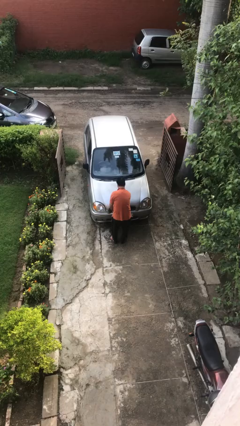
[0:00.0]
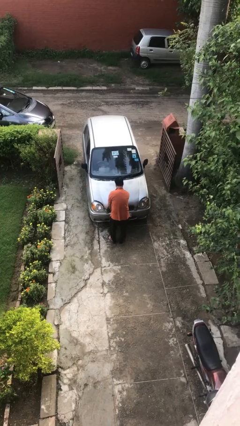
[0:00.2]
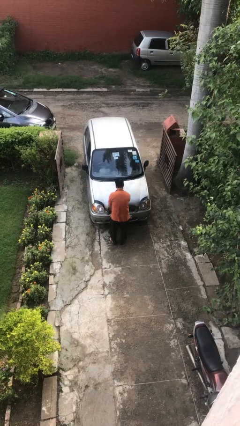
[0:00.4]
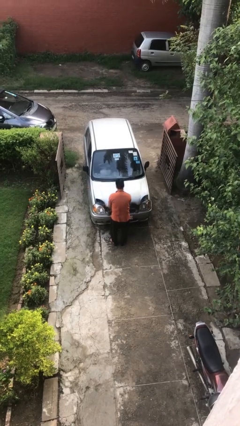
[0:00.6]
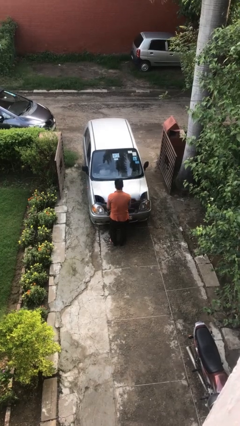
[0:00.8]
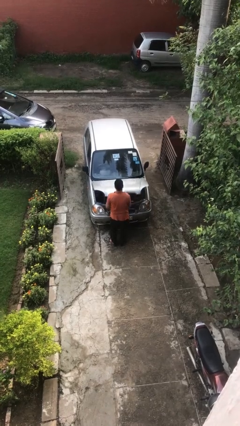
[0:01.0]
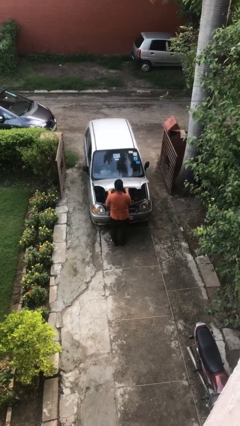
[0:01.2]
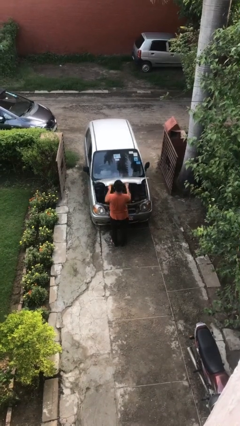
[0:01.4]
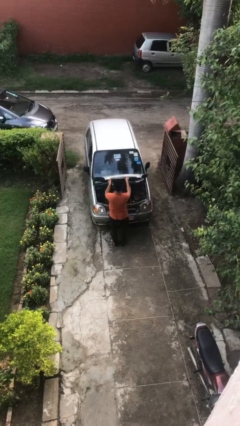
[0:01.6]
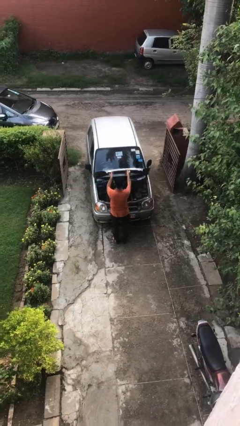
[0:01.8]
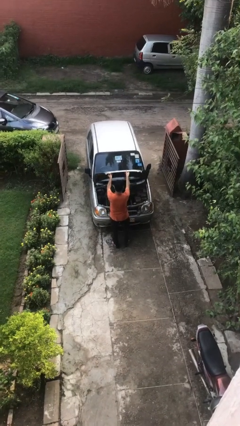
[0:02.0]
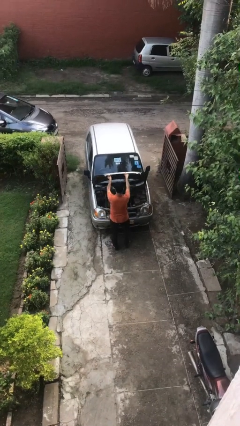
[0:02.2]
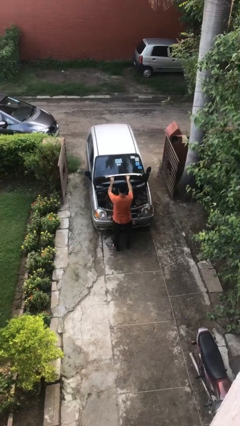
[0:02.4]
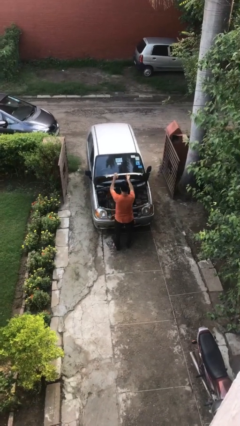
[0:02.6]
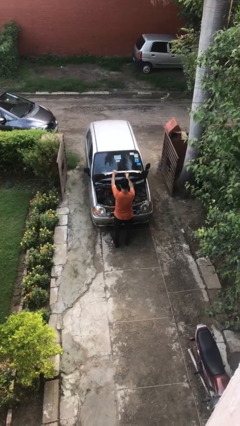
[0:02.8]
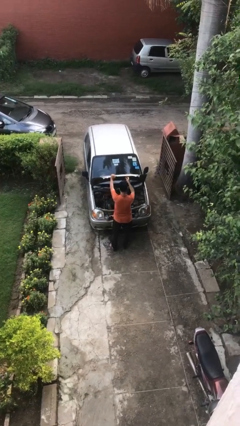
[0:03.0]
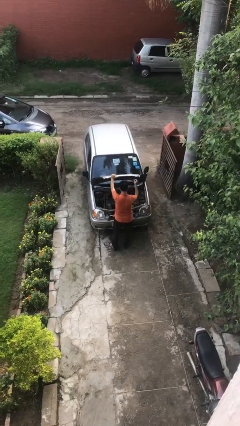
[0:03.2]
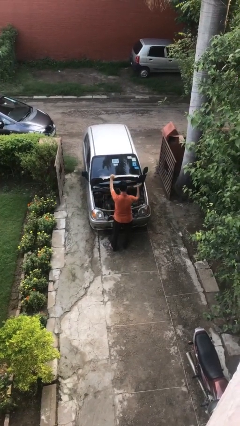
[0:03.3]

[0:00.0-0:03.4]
person opens car hood

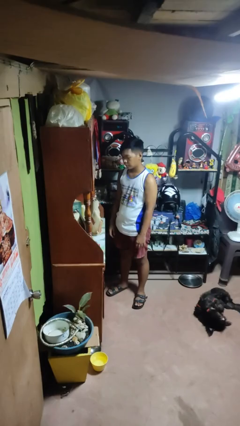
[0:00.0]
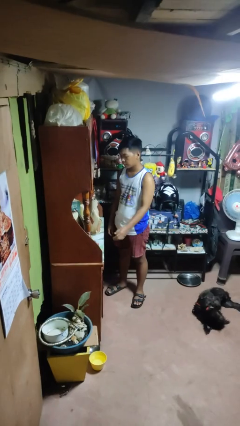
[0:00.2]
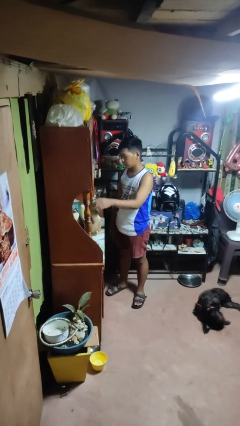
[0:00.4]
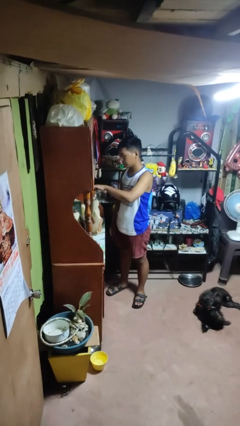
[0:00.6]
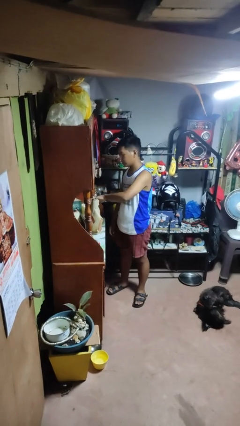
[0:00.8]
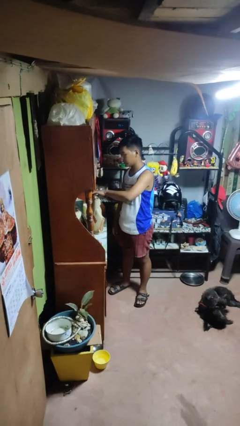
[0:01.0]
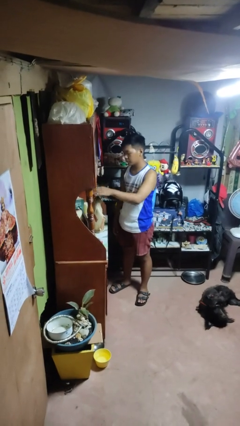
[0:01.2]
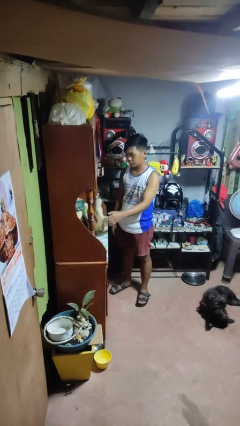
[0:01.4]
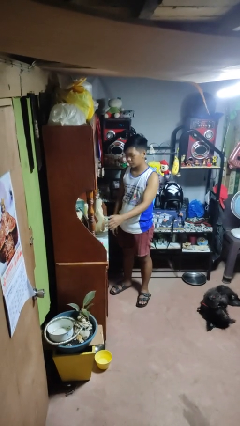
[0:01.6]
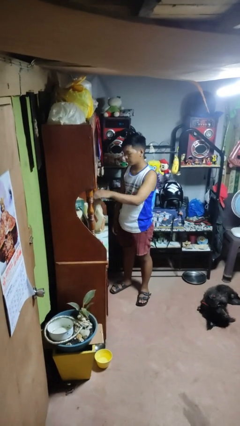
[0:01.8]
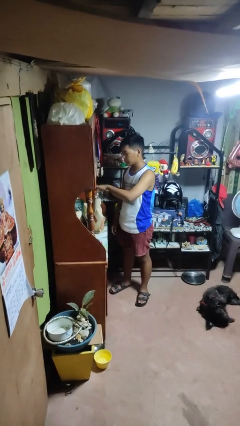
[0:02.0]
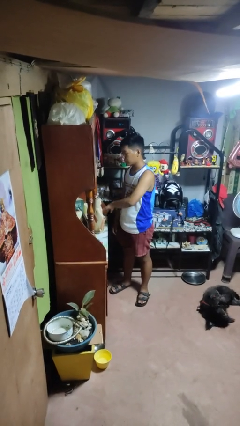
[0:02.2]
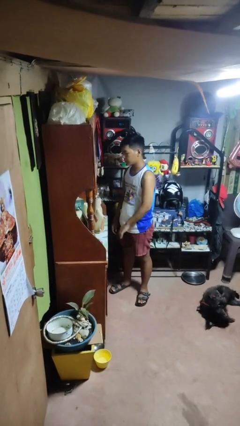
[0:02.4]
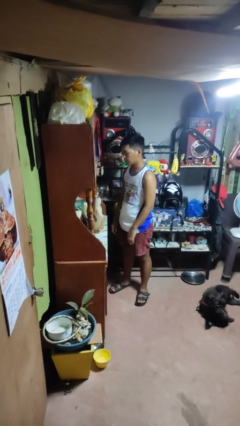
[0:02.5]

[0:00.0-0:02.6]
person waves hand over object

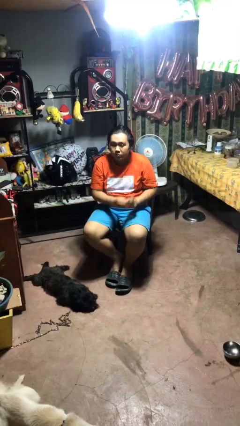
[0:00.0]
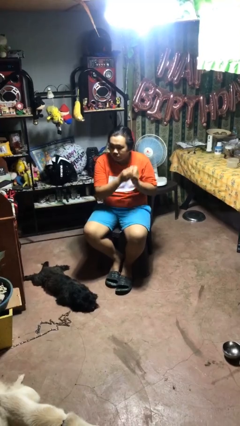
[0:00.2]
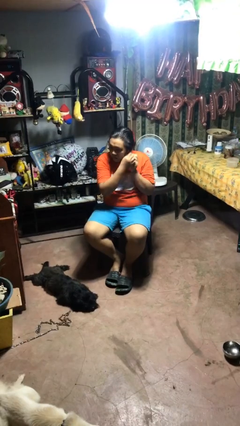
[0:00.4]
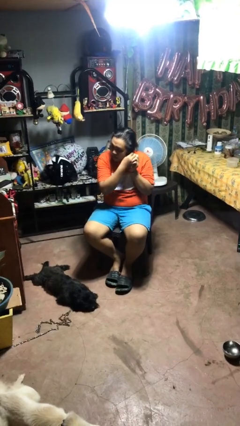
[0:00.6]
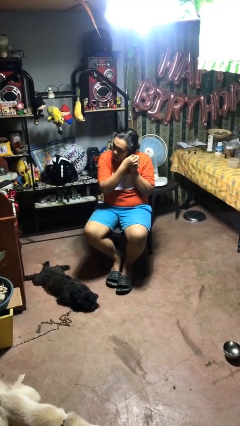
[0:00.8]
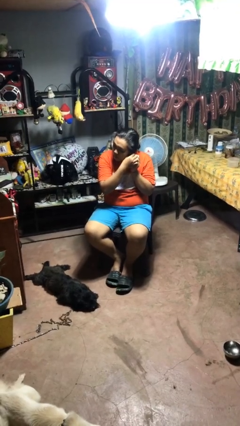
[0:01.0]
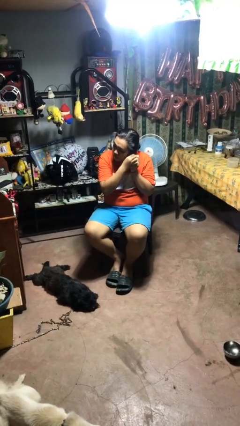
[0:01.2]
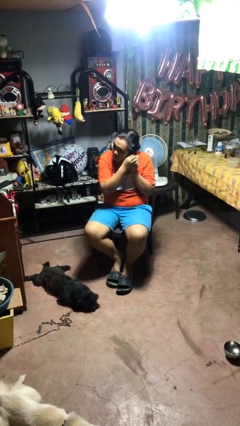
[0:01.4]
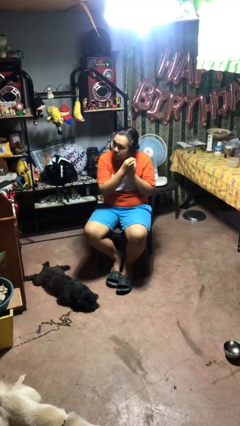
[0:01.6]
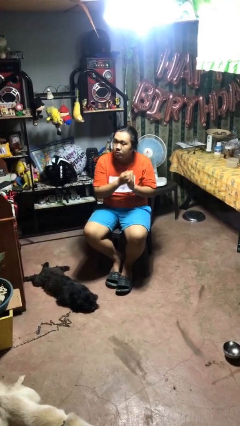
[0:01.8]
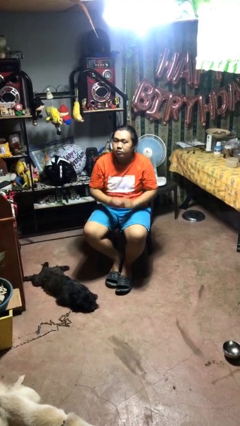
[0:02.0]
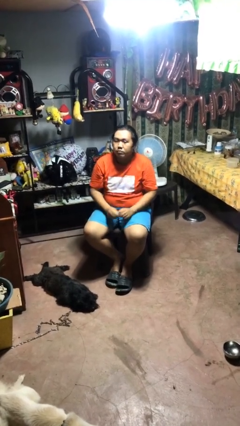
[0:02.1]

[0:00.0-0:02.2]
person takes off earrings

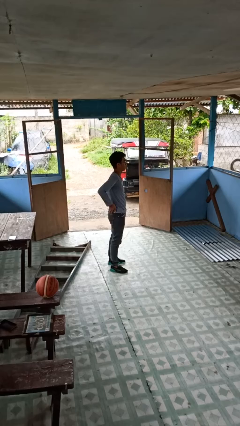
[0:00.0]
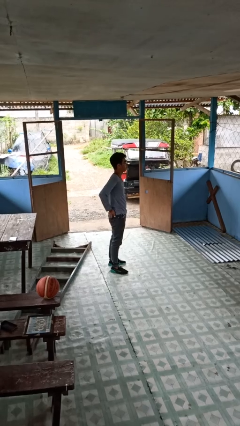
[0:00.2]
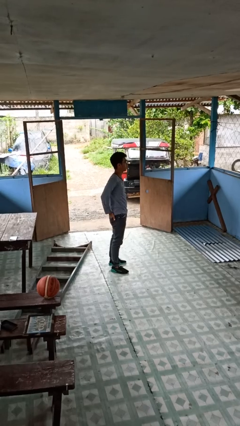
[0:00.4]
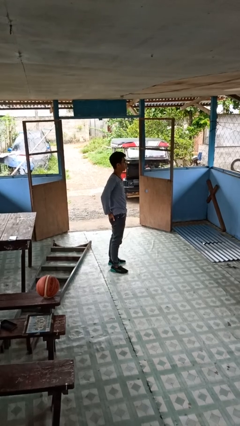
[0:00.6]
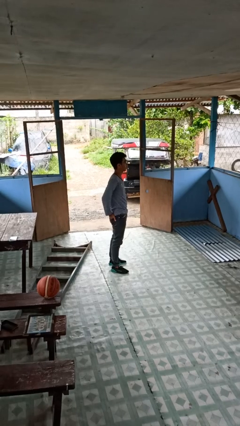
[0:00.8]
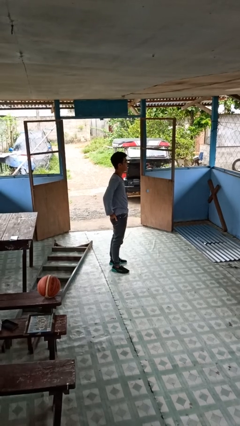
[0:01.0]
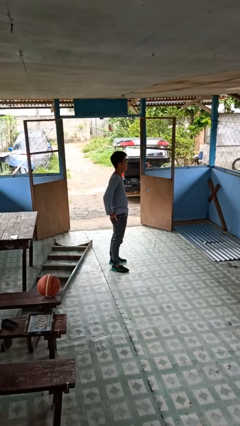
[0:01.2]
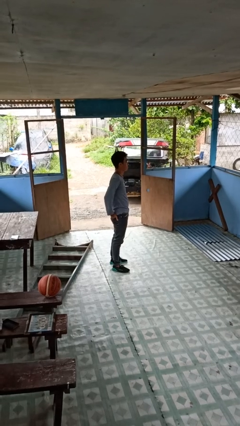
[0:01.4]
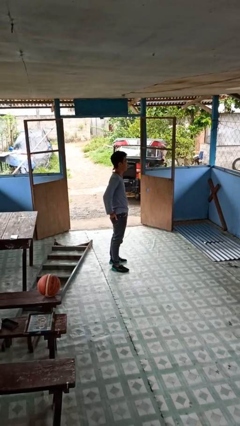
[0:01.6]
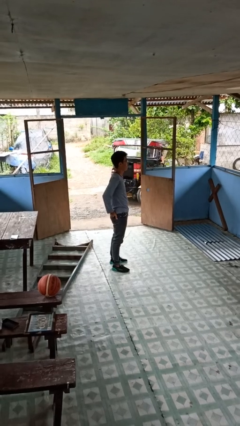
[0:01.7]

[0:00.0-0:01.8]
person puts hands in back pockets

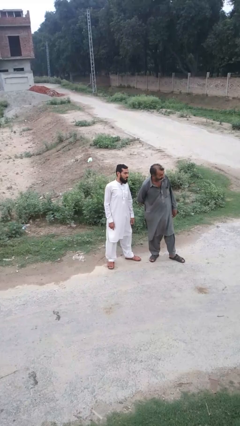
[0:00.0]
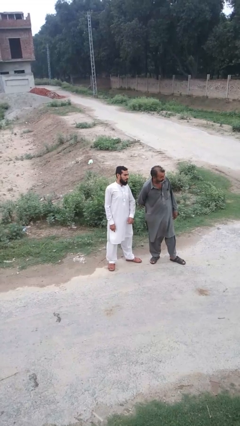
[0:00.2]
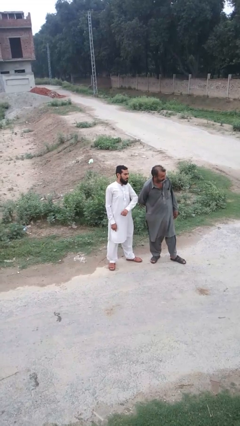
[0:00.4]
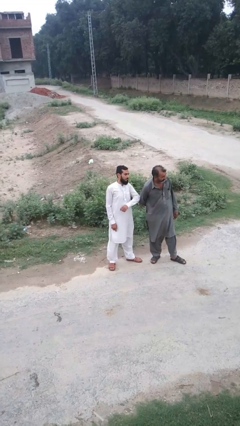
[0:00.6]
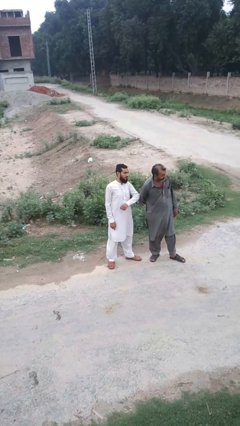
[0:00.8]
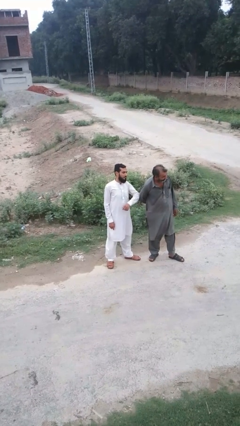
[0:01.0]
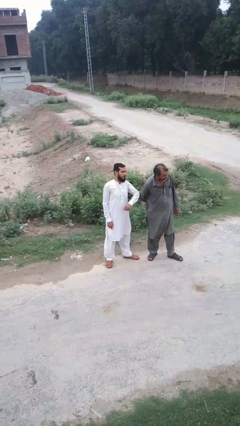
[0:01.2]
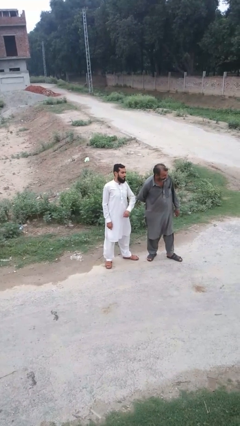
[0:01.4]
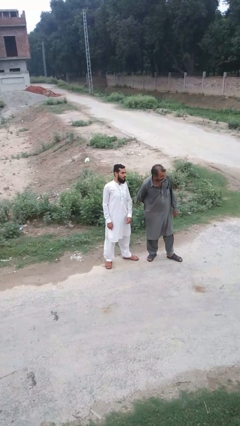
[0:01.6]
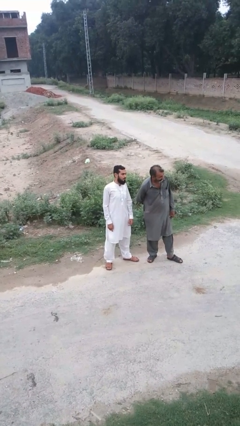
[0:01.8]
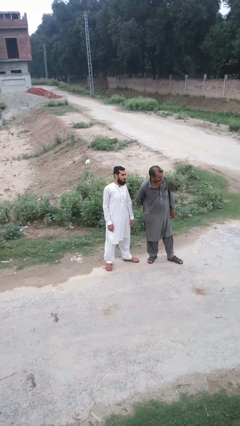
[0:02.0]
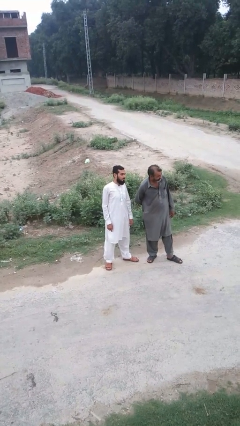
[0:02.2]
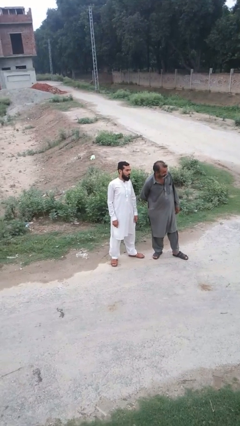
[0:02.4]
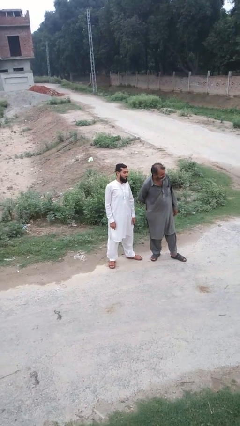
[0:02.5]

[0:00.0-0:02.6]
person nudges person with elbow

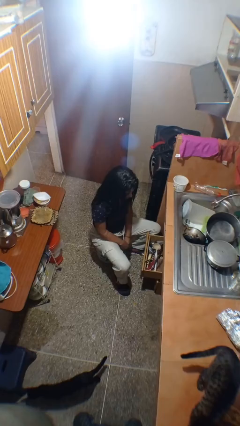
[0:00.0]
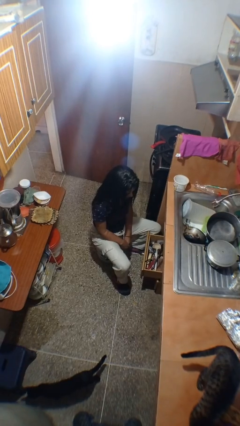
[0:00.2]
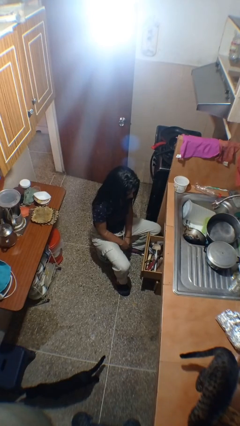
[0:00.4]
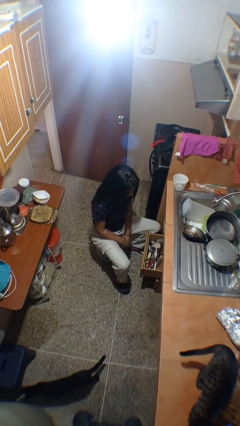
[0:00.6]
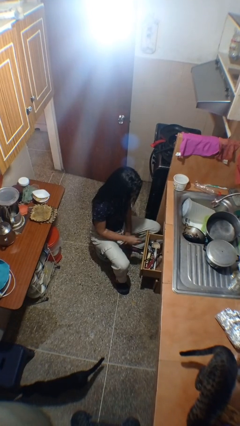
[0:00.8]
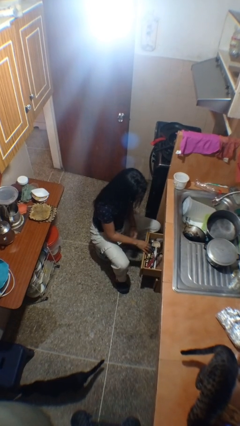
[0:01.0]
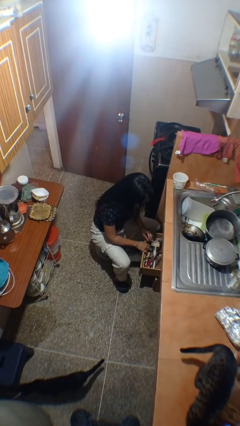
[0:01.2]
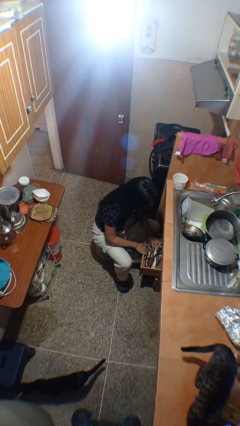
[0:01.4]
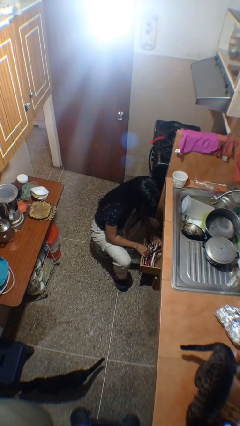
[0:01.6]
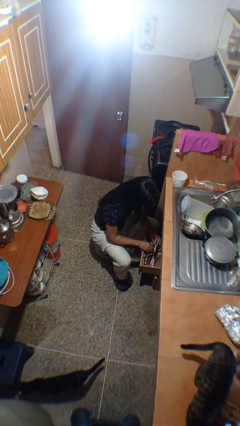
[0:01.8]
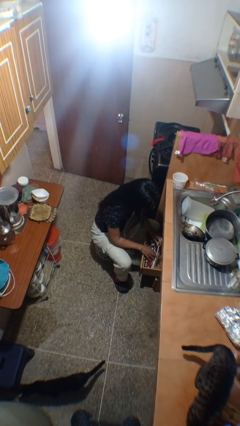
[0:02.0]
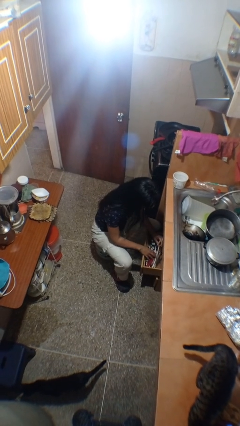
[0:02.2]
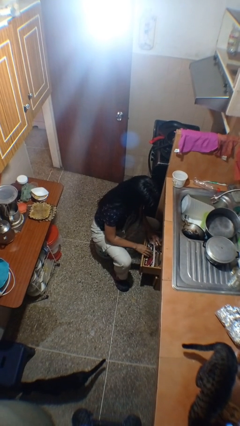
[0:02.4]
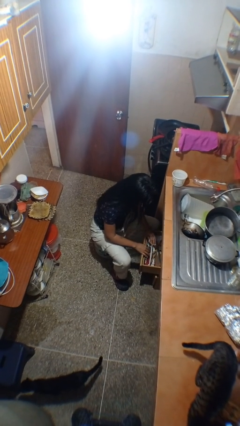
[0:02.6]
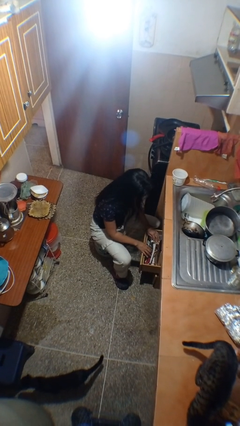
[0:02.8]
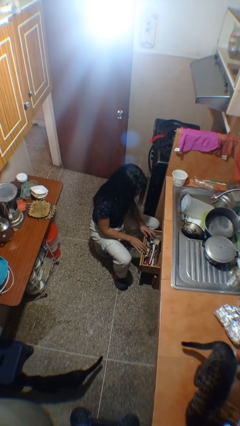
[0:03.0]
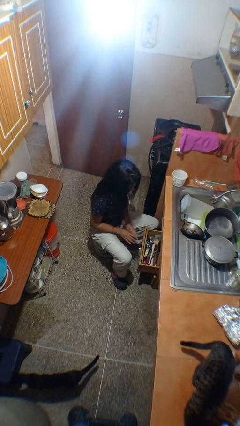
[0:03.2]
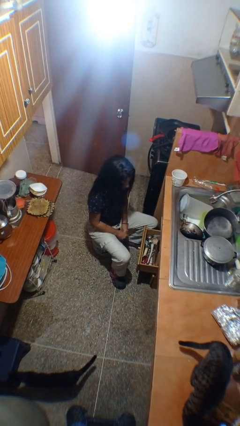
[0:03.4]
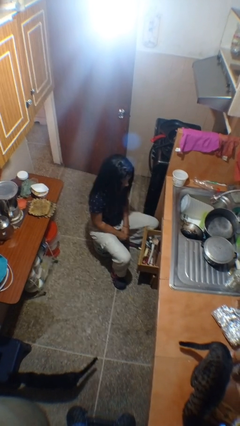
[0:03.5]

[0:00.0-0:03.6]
person searches in kitchen drawer

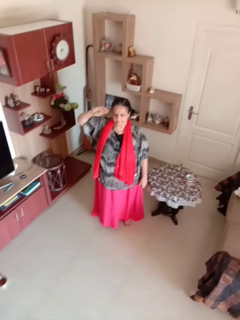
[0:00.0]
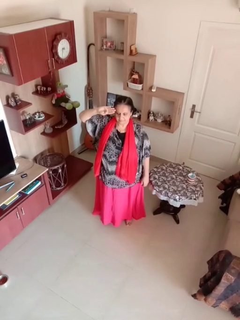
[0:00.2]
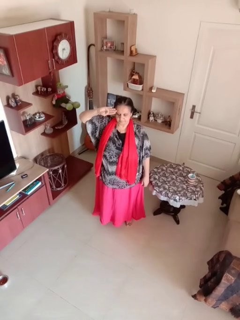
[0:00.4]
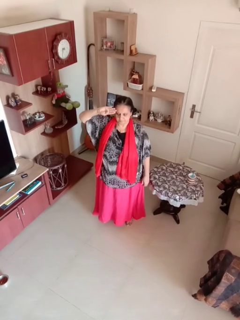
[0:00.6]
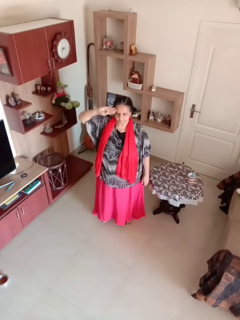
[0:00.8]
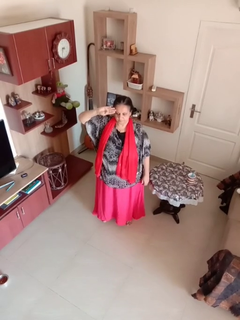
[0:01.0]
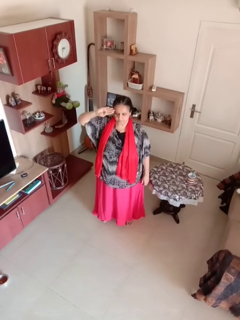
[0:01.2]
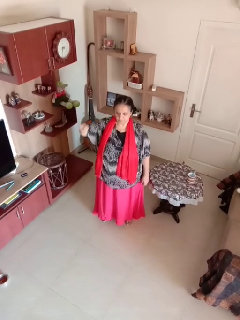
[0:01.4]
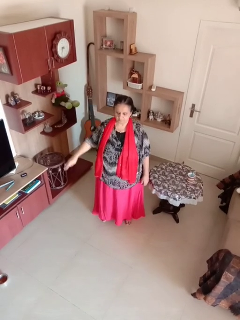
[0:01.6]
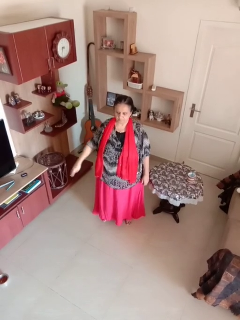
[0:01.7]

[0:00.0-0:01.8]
person salutes
